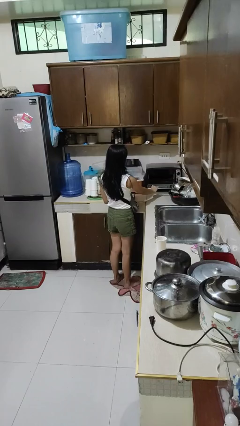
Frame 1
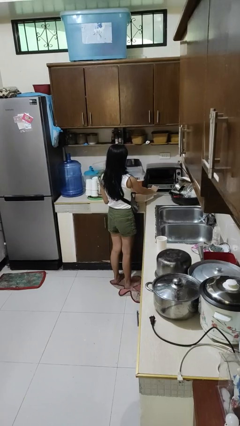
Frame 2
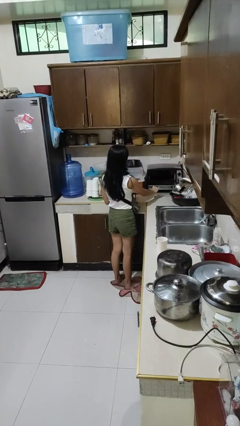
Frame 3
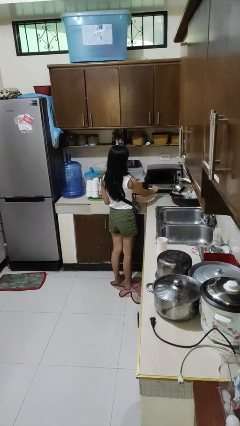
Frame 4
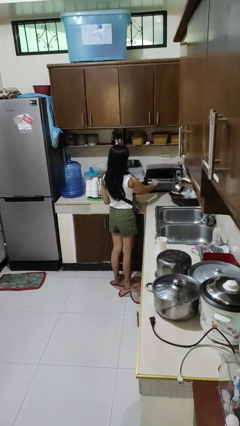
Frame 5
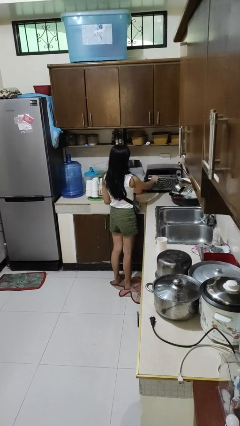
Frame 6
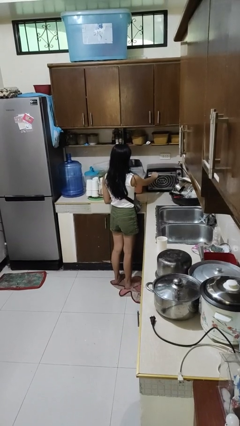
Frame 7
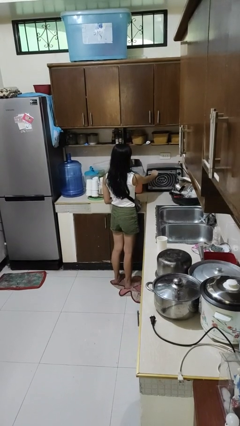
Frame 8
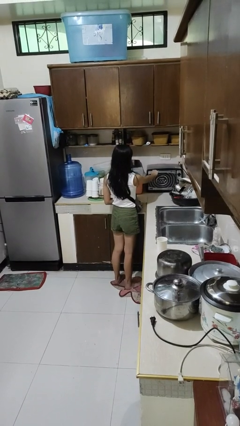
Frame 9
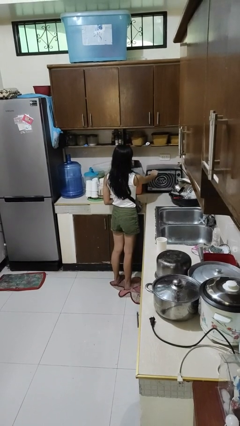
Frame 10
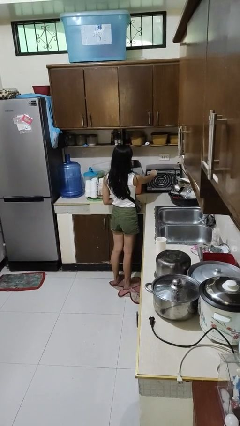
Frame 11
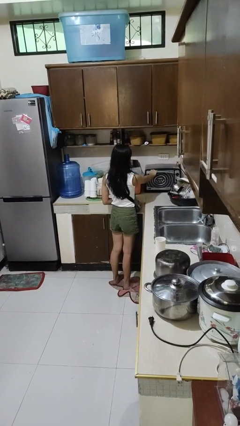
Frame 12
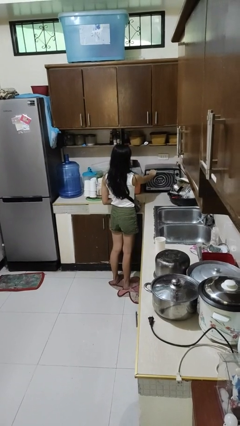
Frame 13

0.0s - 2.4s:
person closes microwave

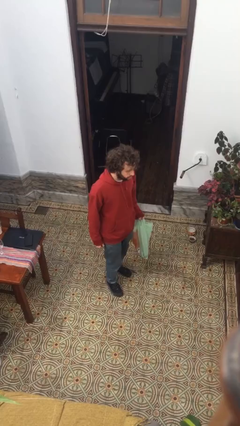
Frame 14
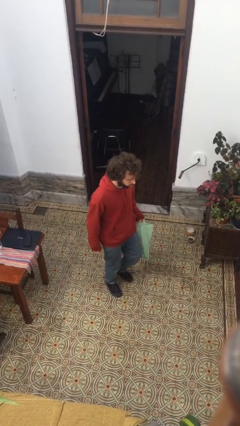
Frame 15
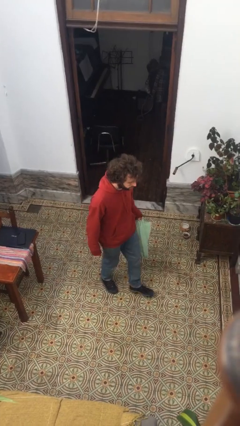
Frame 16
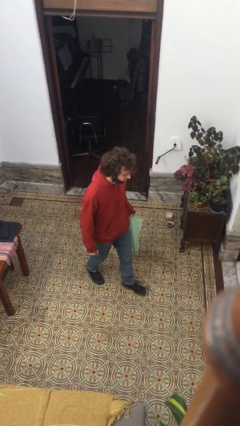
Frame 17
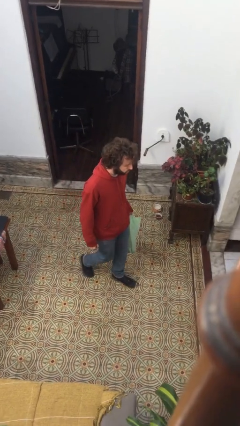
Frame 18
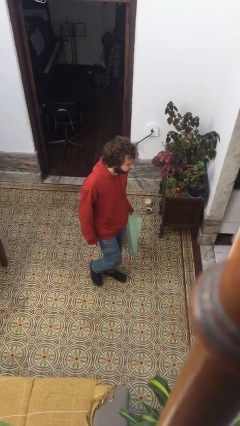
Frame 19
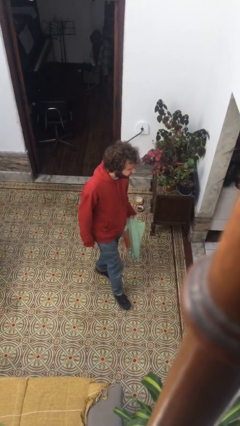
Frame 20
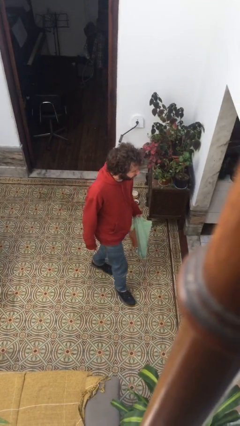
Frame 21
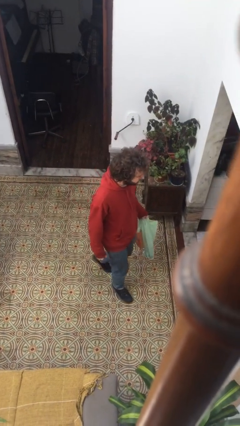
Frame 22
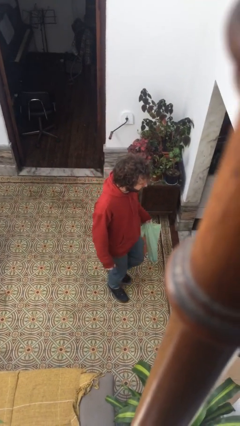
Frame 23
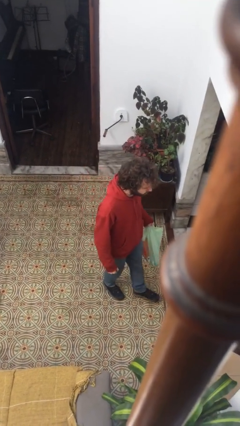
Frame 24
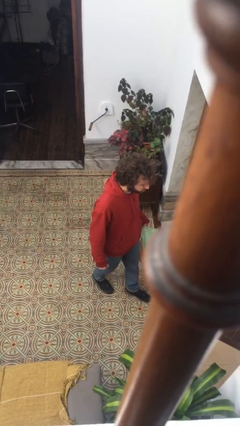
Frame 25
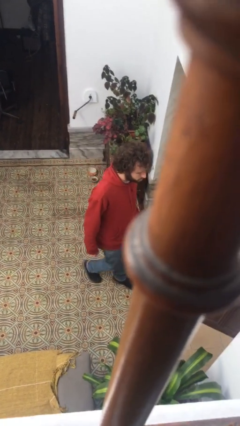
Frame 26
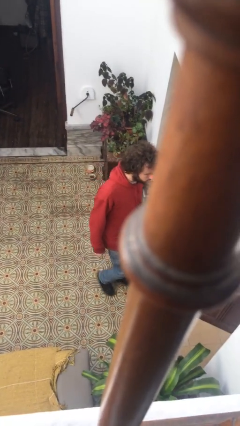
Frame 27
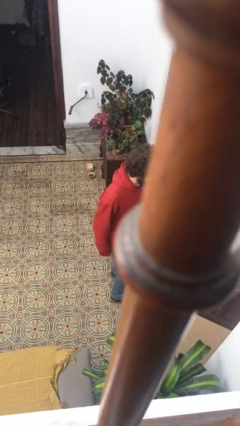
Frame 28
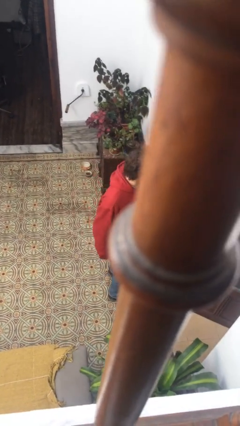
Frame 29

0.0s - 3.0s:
person carries groceries

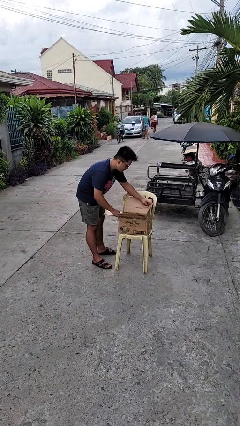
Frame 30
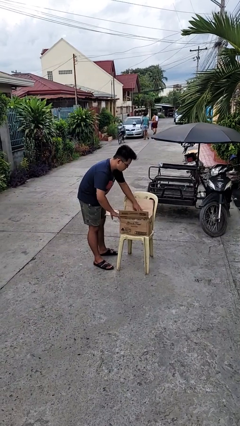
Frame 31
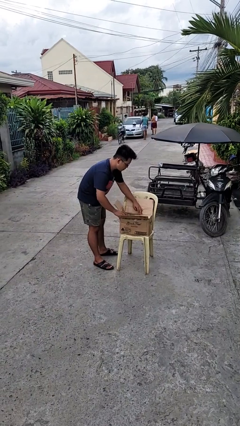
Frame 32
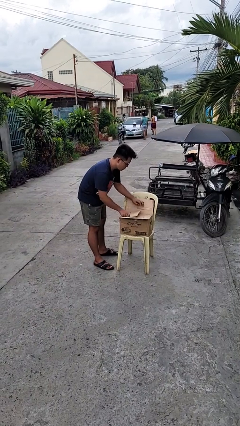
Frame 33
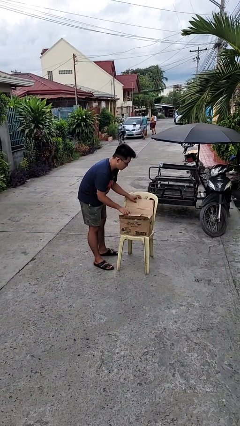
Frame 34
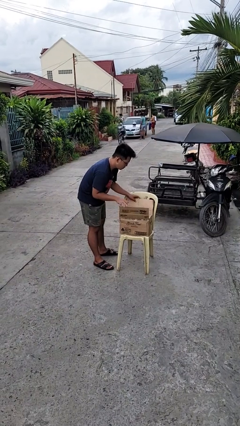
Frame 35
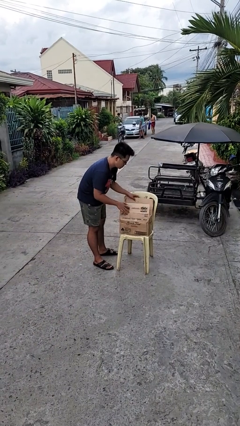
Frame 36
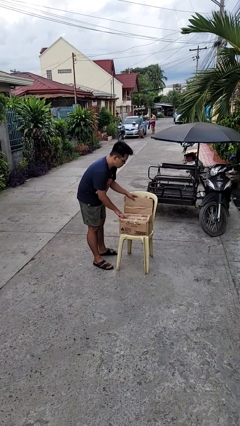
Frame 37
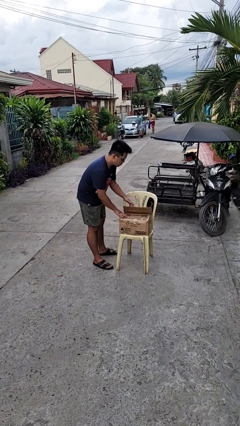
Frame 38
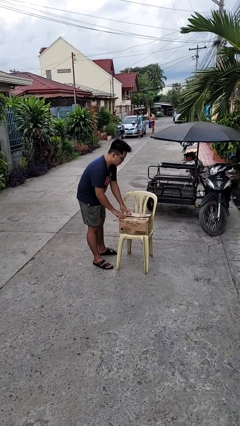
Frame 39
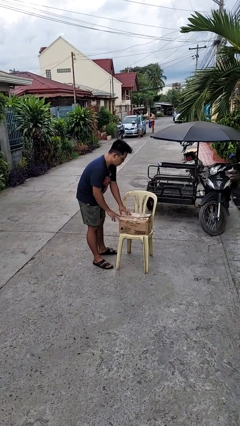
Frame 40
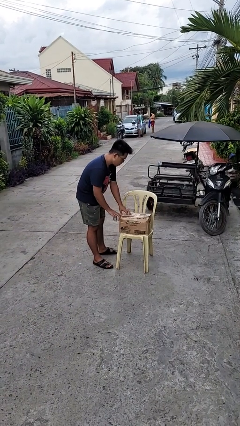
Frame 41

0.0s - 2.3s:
person closes box

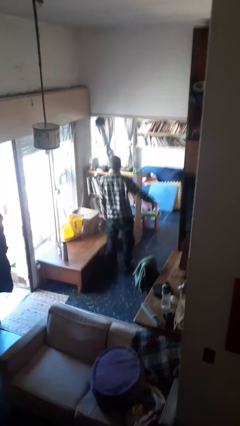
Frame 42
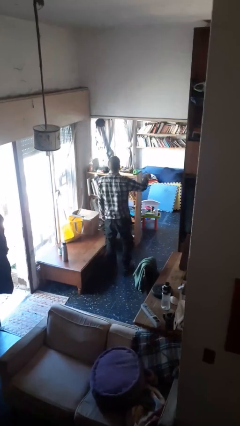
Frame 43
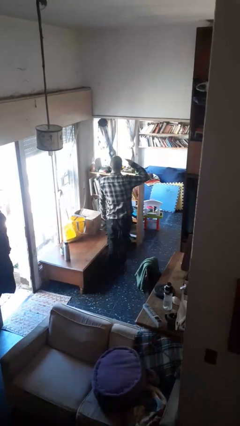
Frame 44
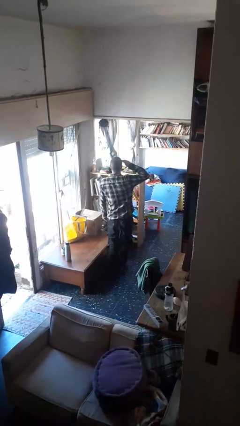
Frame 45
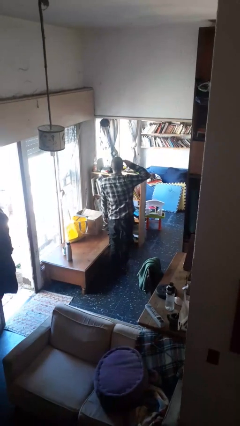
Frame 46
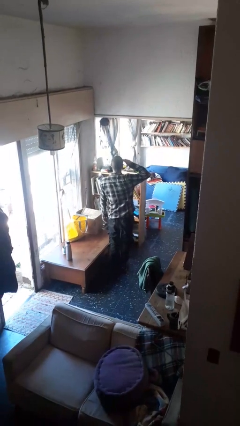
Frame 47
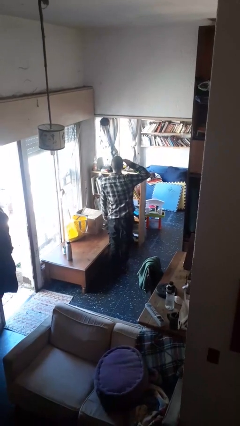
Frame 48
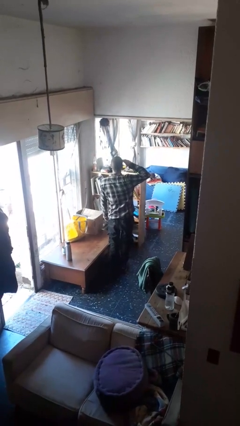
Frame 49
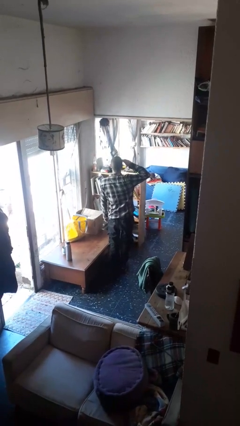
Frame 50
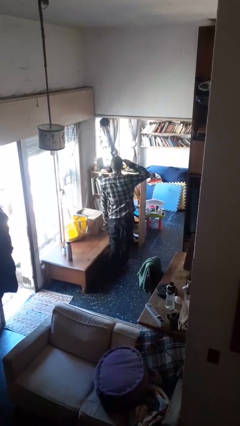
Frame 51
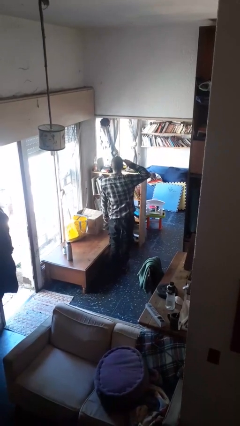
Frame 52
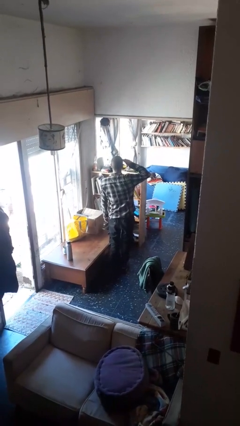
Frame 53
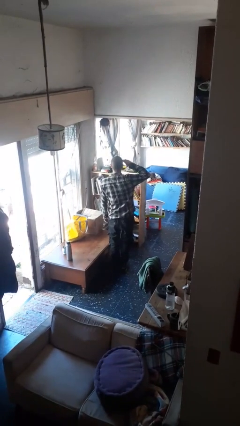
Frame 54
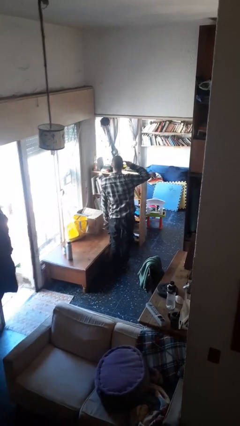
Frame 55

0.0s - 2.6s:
person salutes

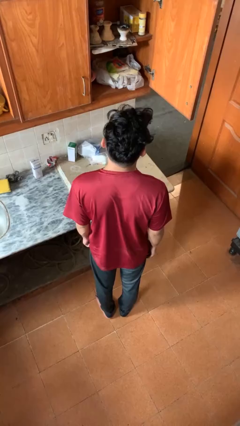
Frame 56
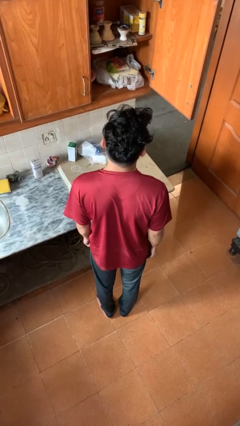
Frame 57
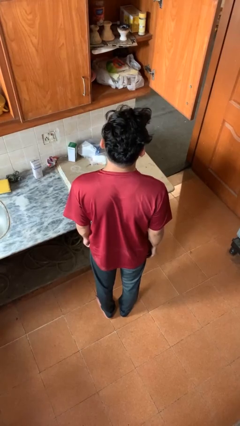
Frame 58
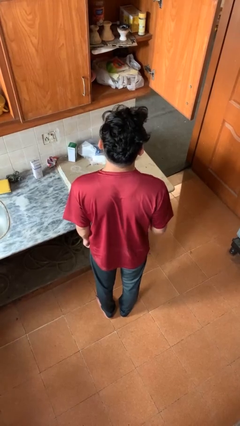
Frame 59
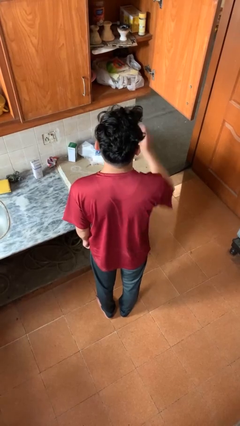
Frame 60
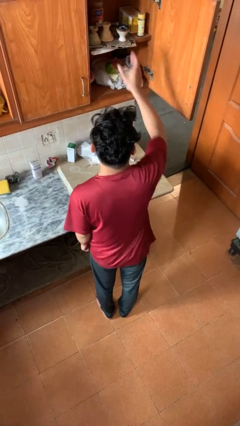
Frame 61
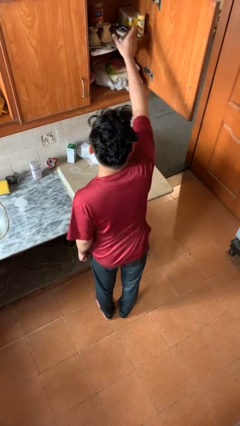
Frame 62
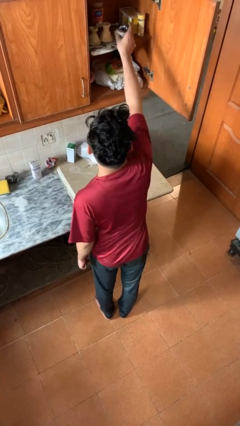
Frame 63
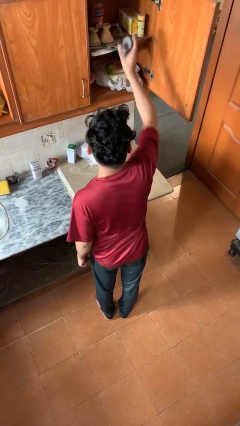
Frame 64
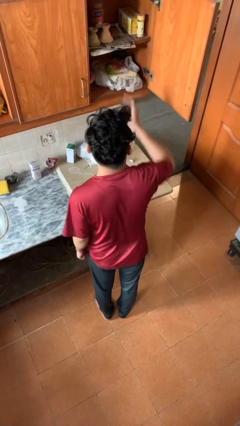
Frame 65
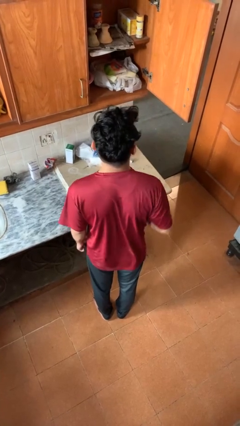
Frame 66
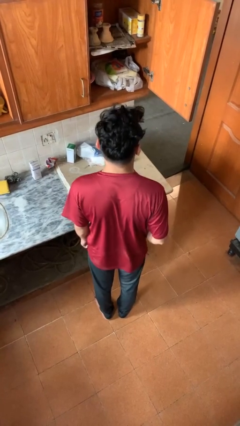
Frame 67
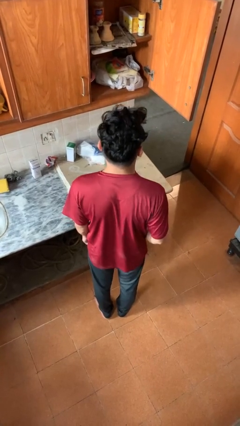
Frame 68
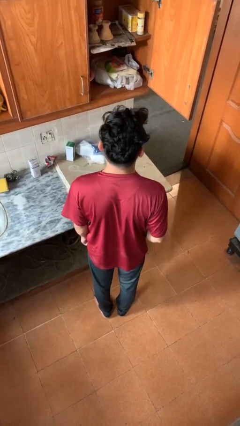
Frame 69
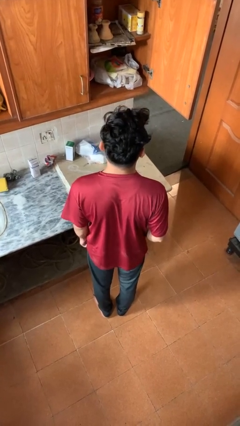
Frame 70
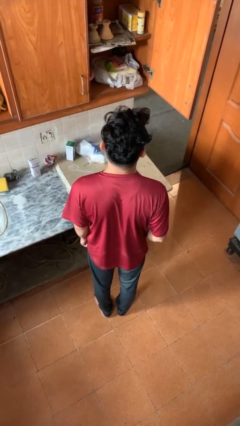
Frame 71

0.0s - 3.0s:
person takes object from cabinet

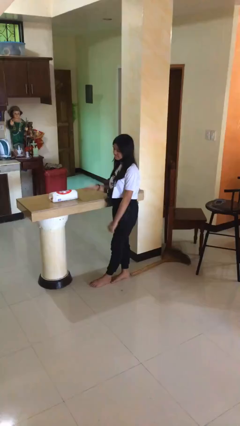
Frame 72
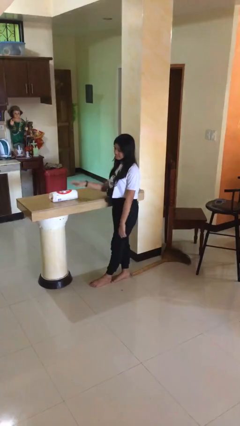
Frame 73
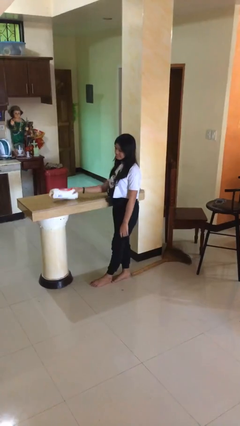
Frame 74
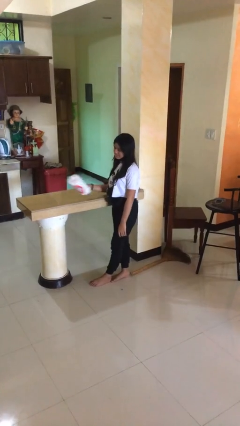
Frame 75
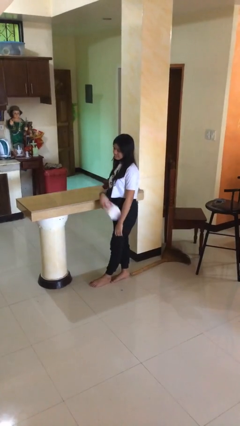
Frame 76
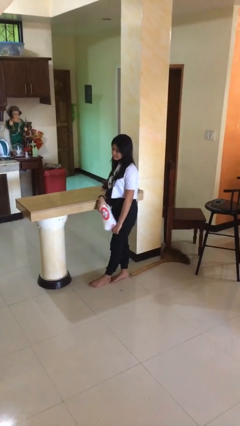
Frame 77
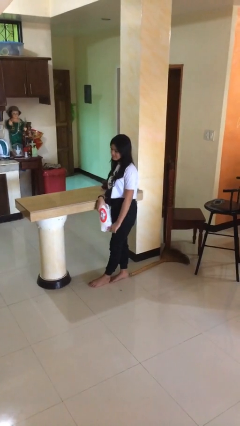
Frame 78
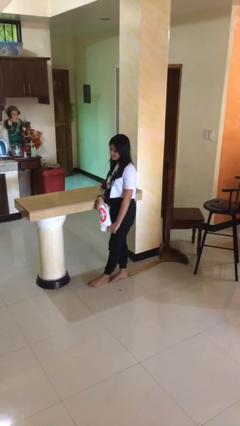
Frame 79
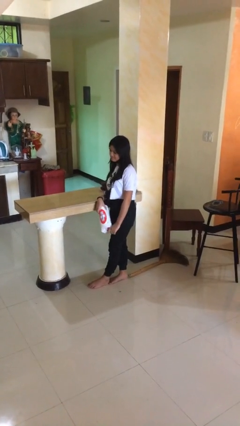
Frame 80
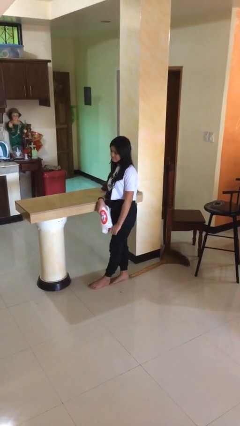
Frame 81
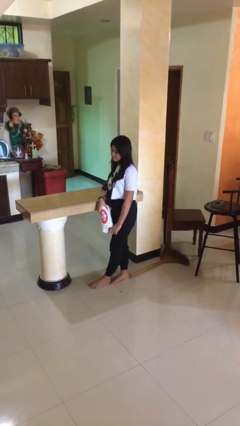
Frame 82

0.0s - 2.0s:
person picks up object from countertop

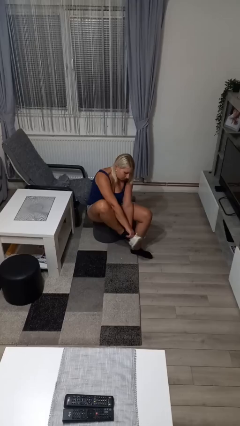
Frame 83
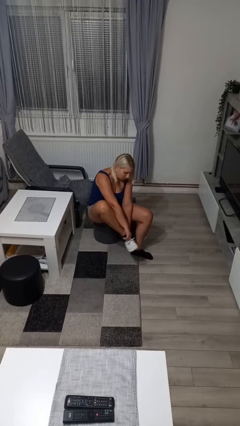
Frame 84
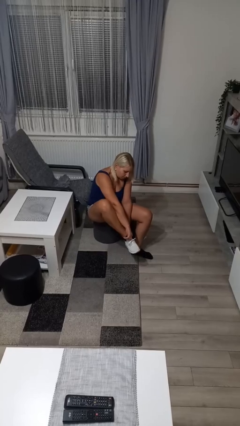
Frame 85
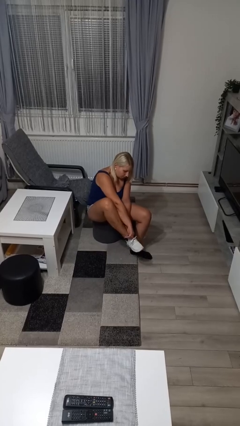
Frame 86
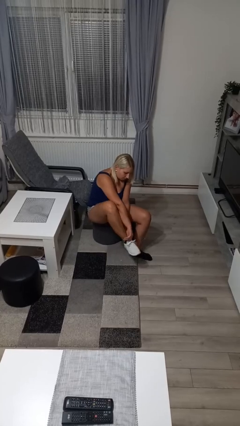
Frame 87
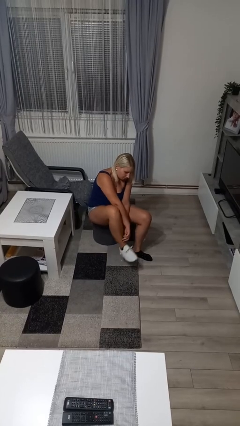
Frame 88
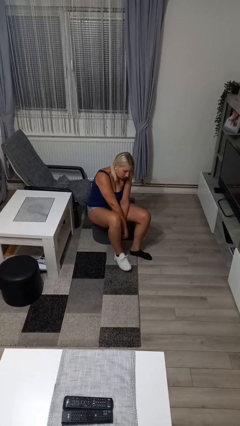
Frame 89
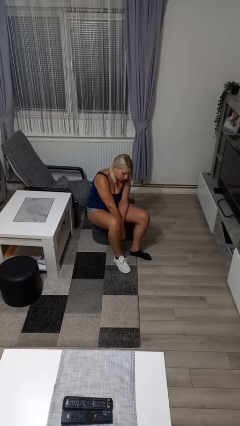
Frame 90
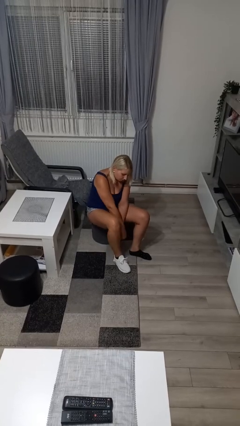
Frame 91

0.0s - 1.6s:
person puts on shoes
